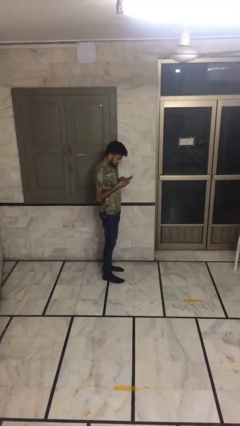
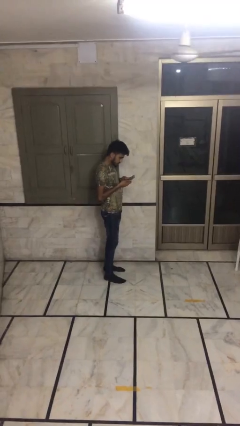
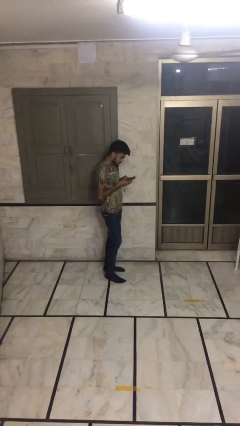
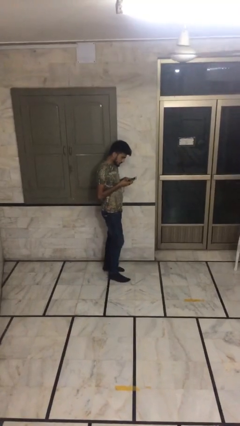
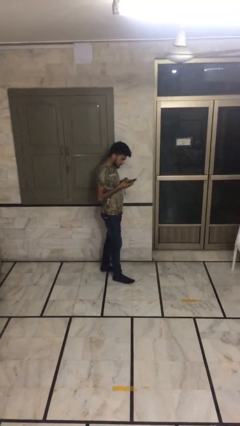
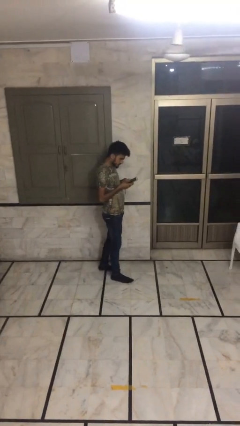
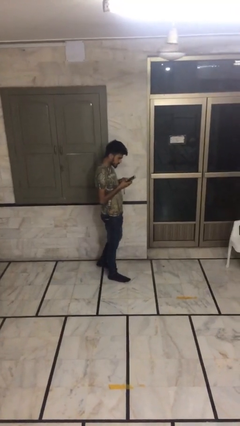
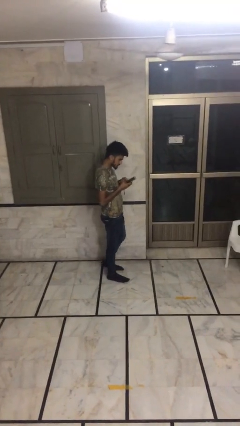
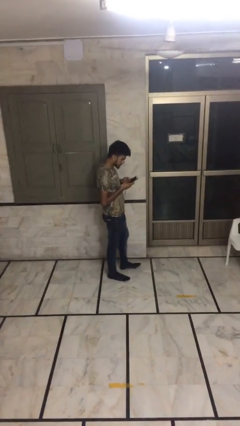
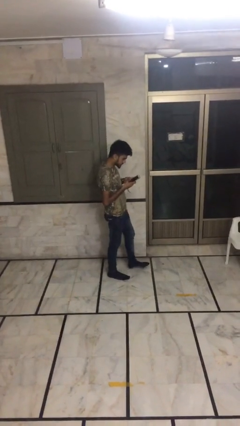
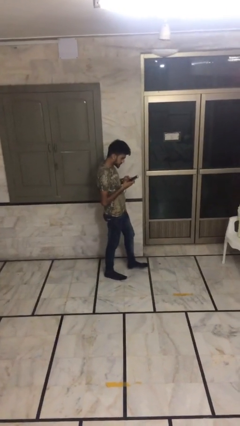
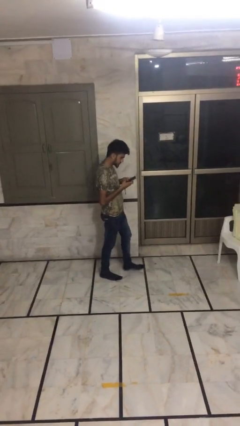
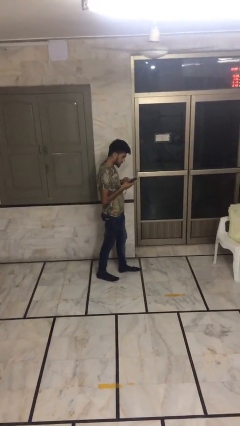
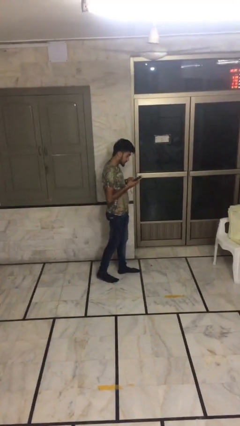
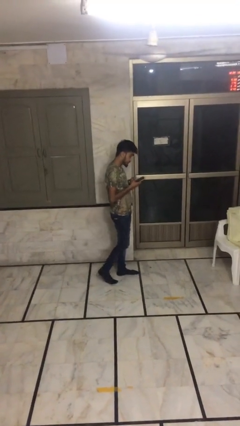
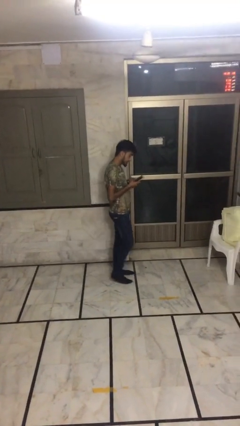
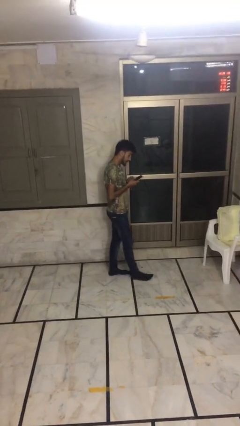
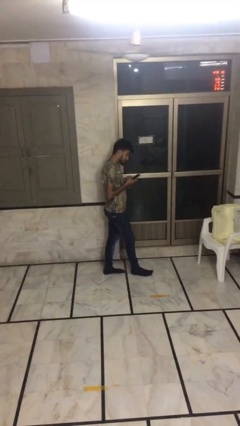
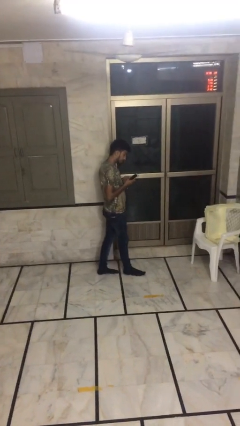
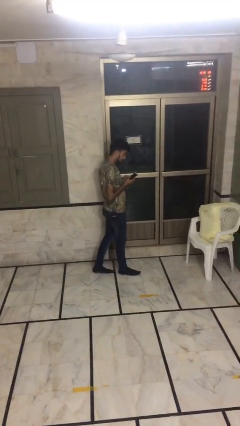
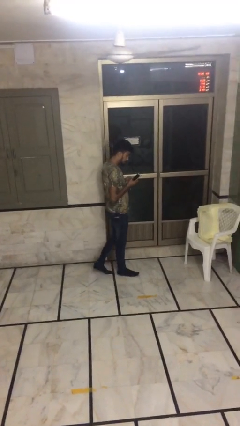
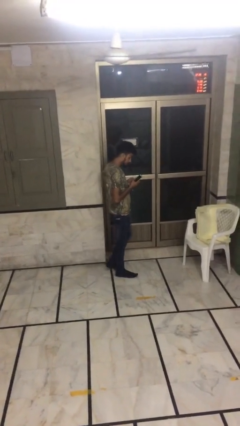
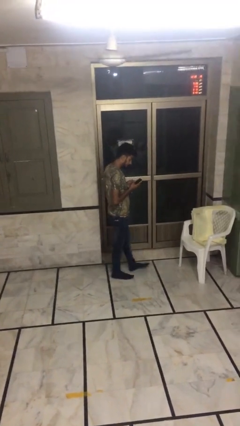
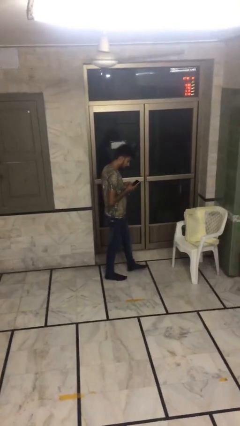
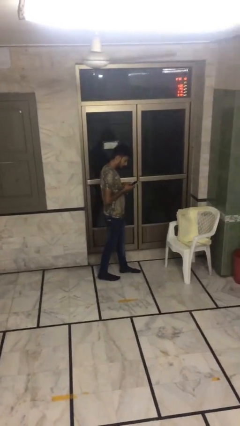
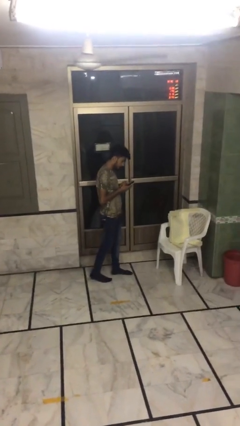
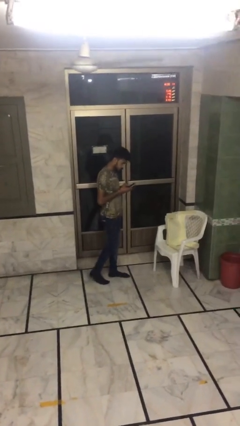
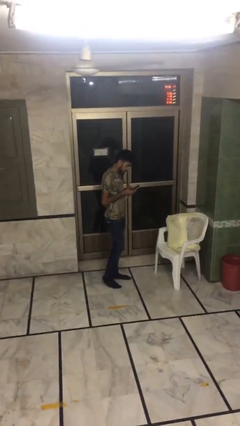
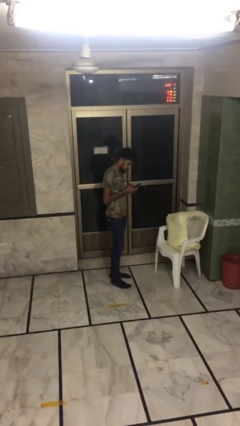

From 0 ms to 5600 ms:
person texts on phone

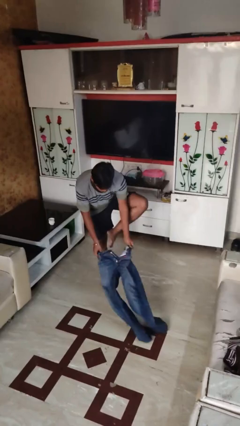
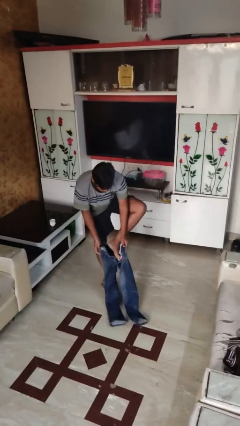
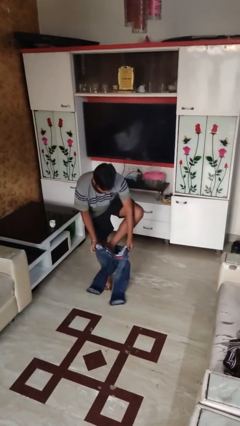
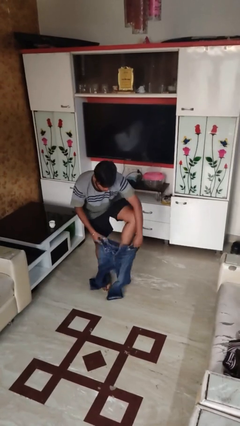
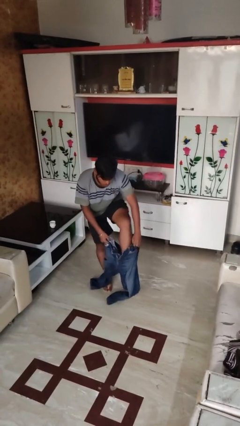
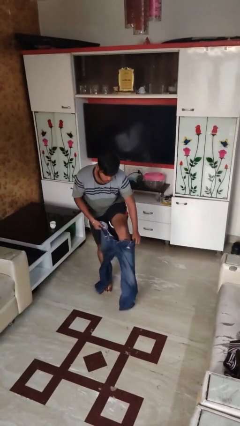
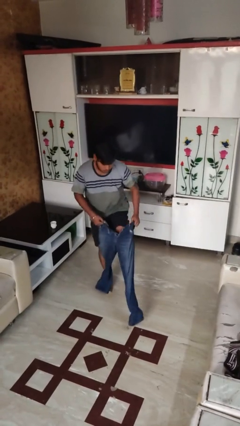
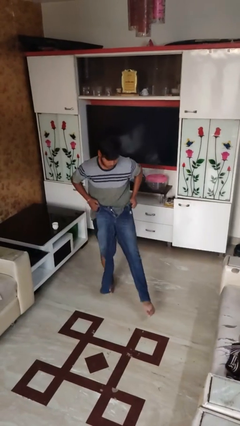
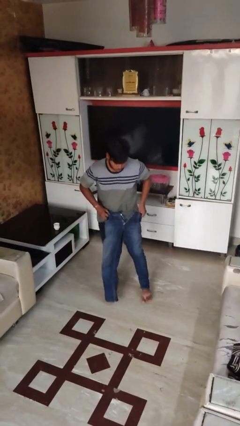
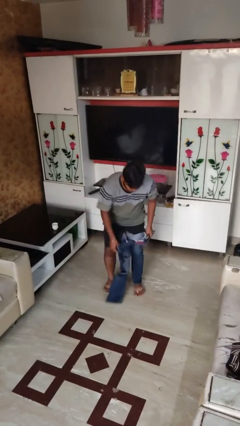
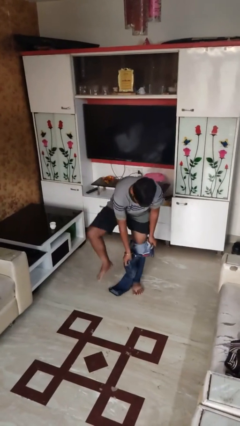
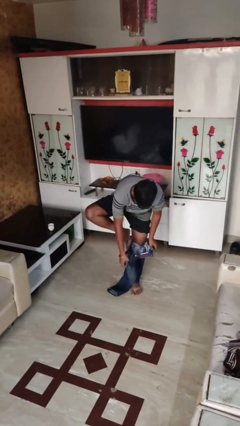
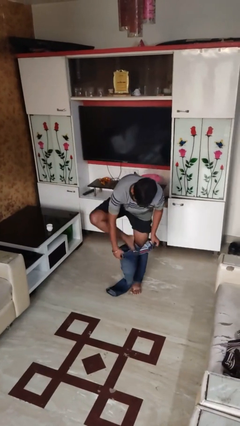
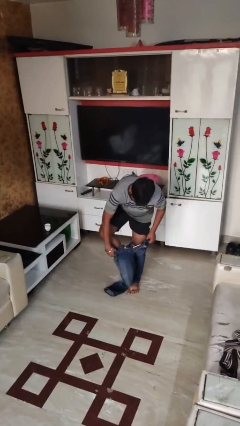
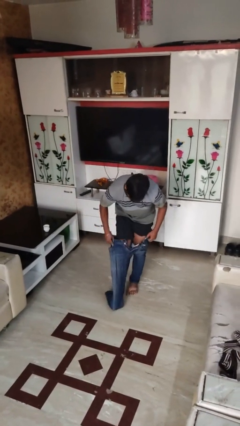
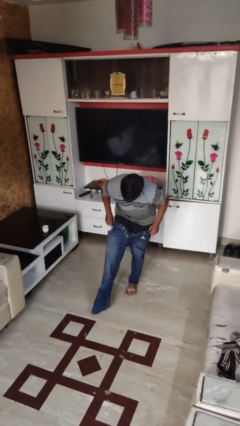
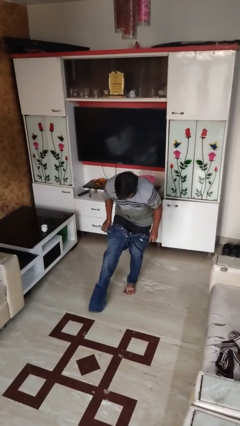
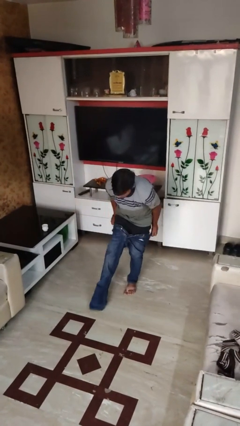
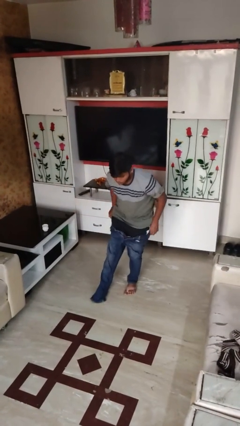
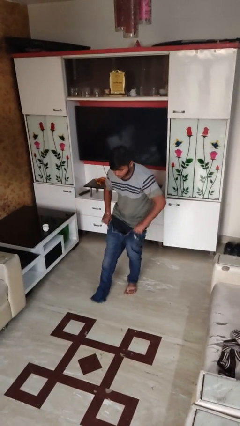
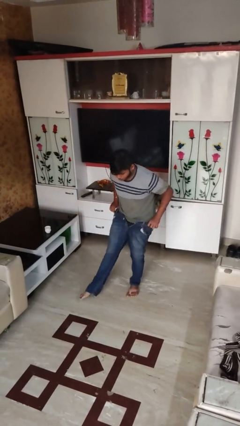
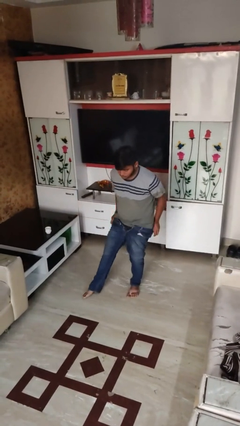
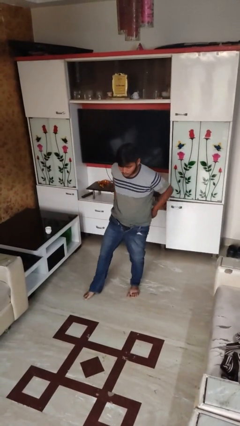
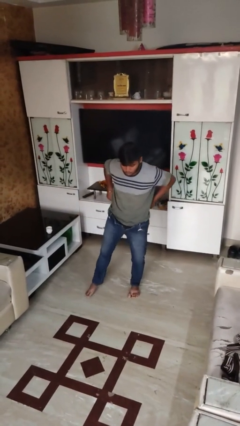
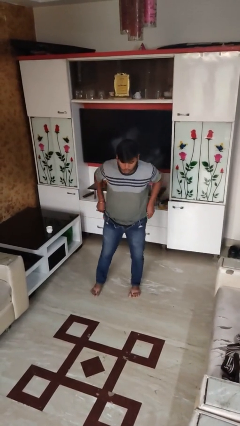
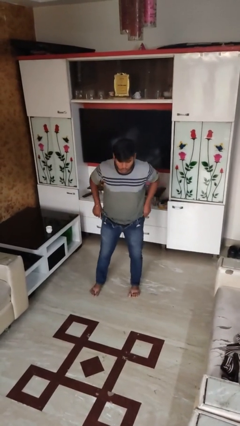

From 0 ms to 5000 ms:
person puts on pants

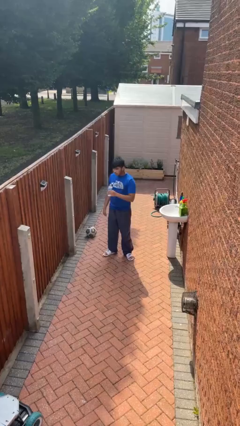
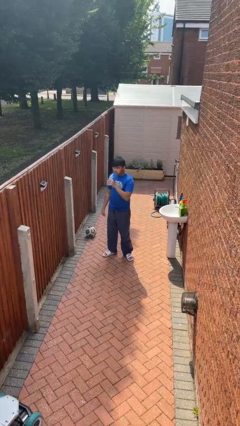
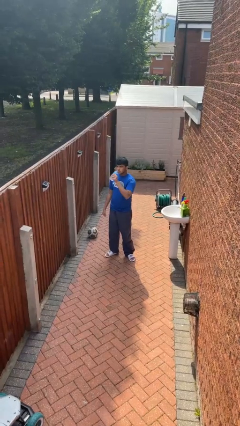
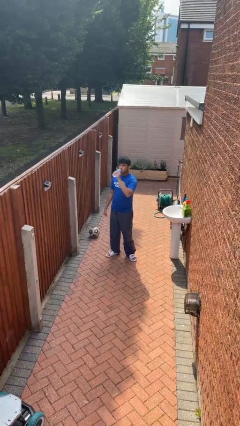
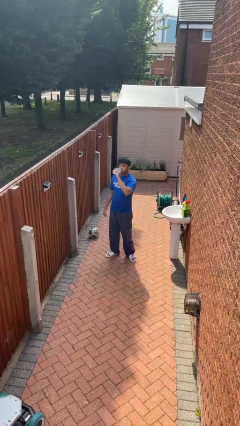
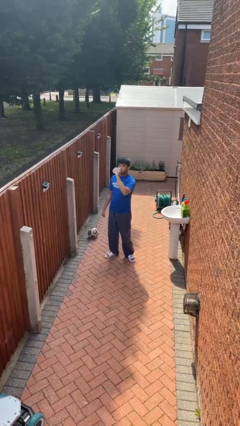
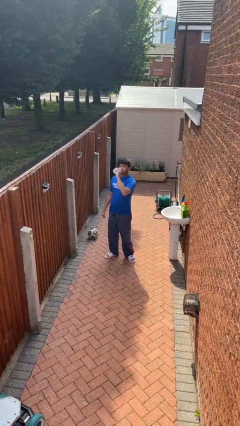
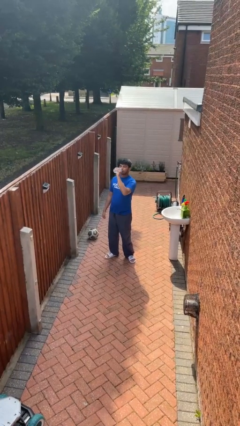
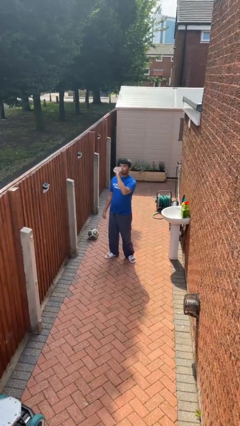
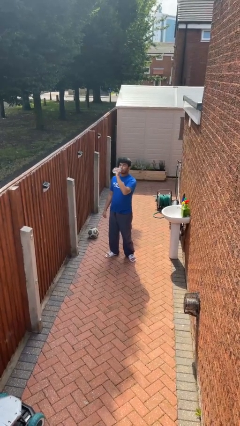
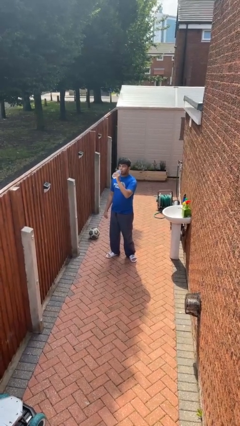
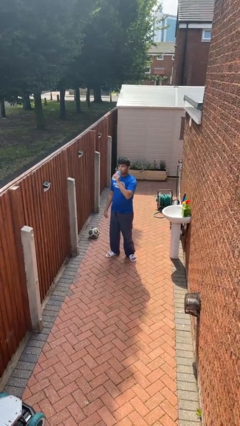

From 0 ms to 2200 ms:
person drinks from bottle

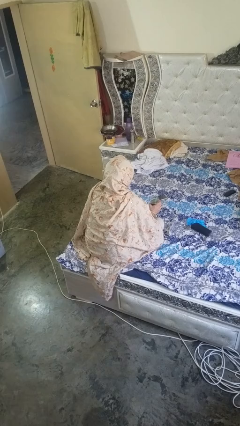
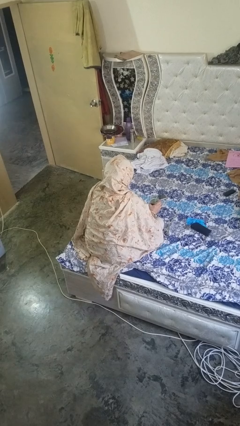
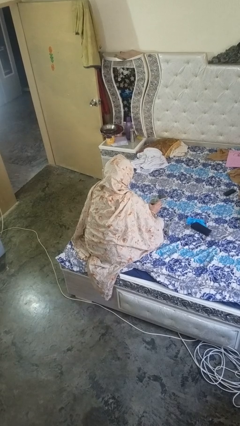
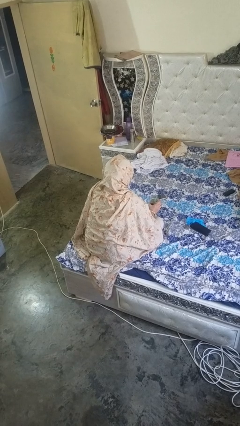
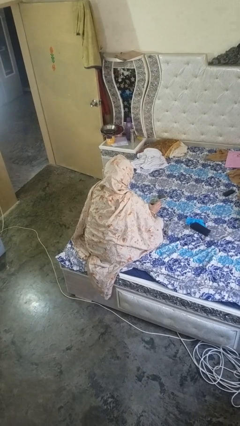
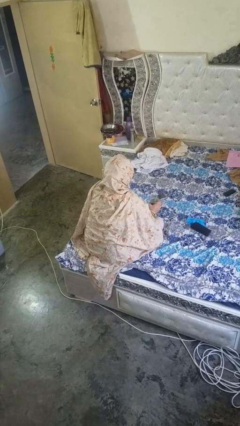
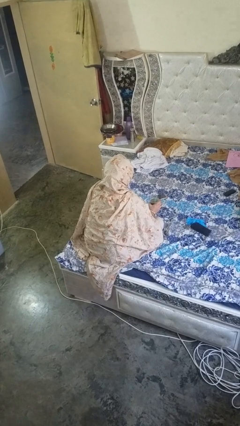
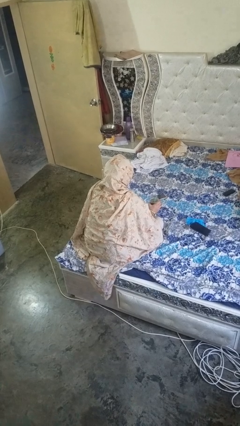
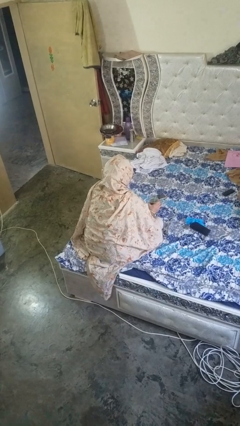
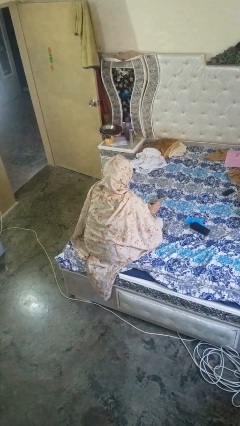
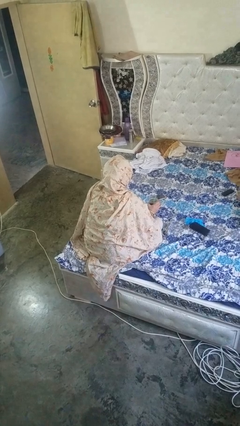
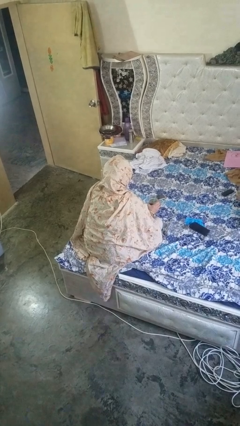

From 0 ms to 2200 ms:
person drinks from straw

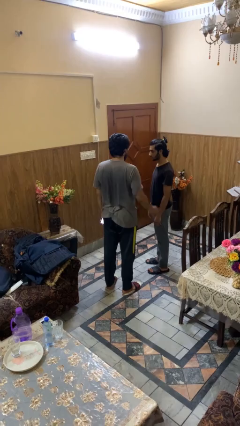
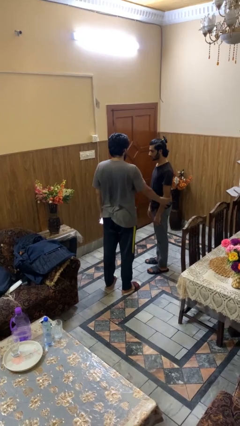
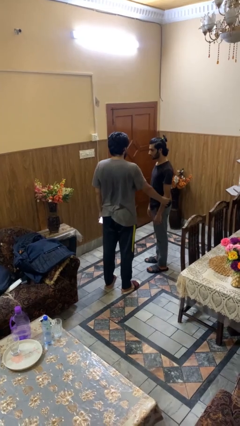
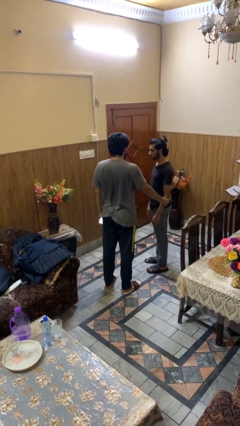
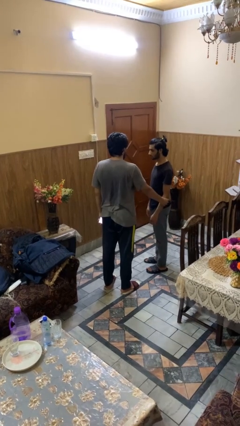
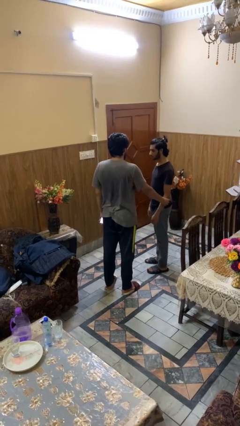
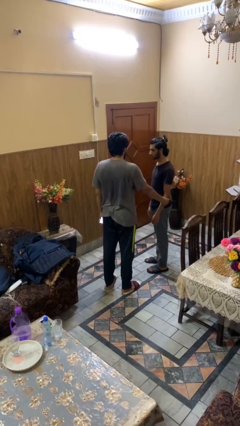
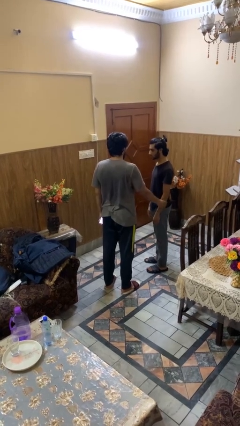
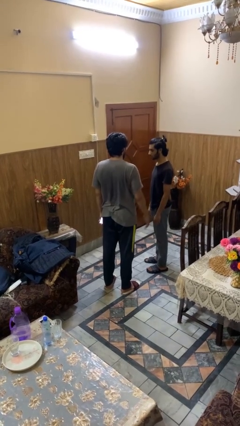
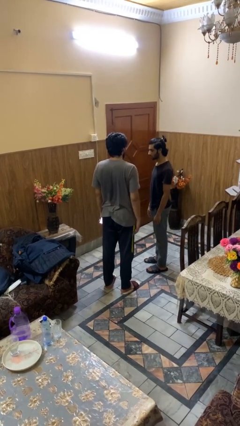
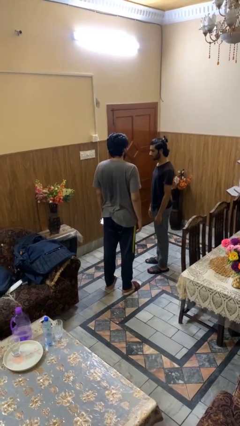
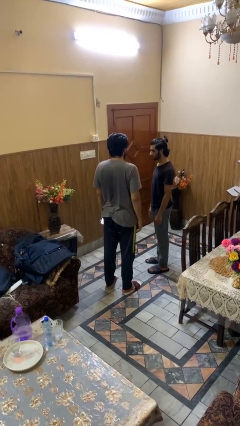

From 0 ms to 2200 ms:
person grabs person by forearm

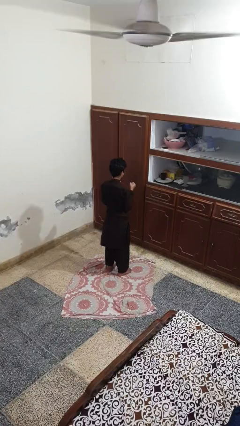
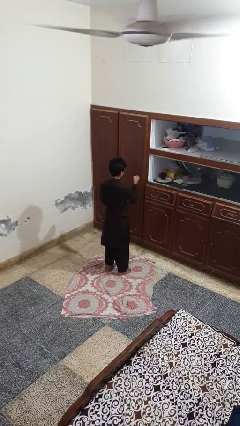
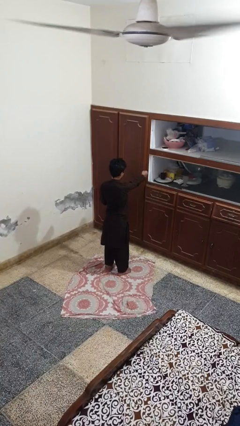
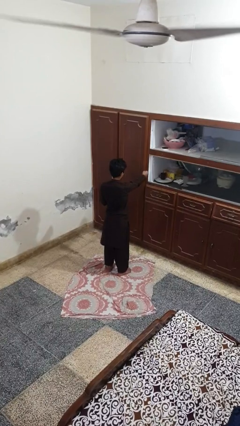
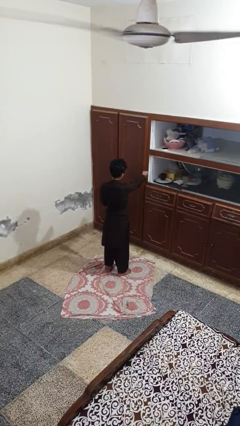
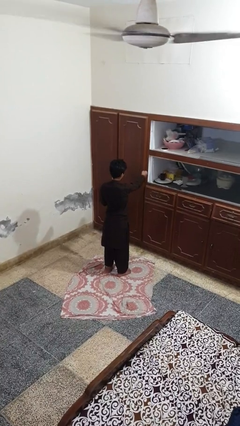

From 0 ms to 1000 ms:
person punches
